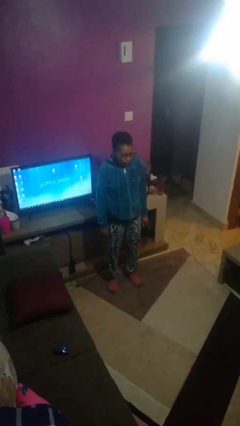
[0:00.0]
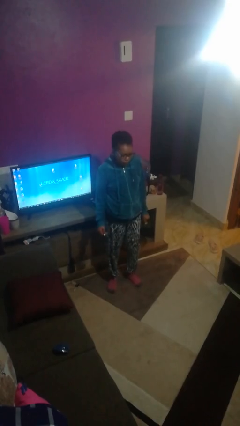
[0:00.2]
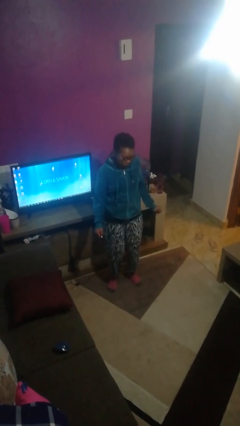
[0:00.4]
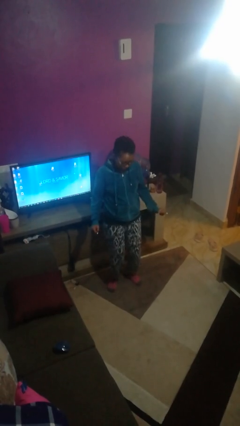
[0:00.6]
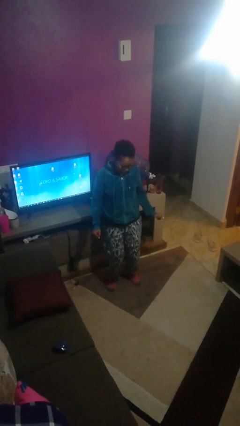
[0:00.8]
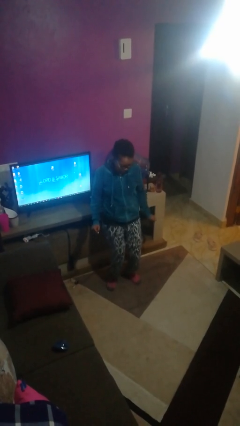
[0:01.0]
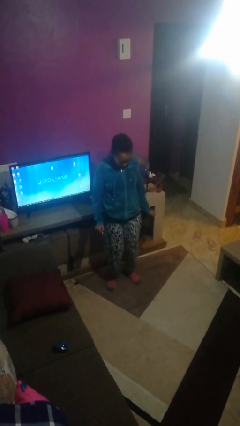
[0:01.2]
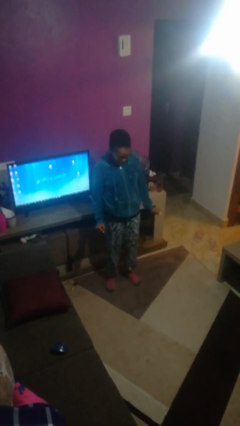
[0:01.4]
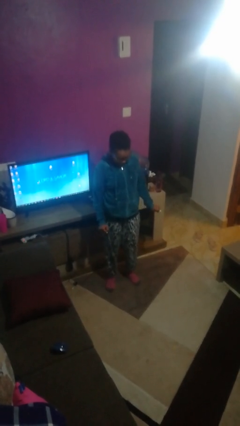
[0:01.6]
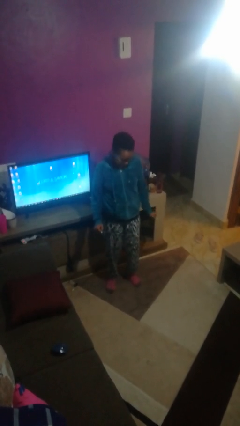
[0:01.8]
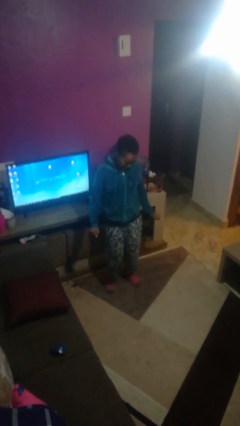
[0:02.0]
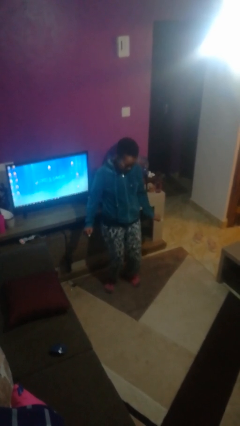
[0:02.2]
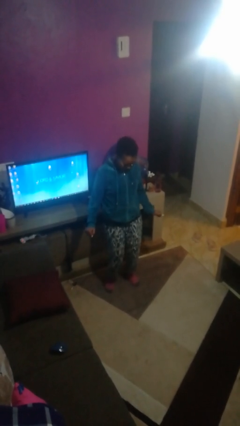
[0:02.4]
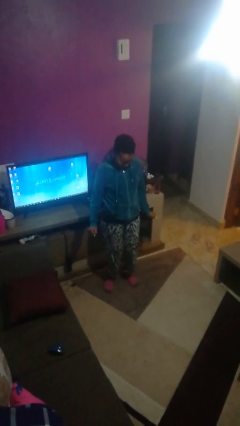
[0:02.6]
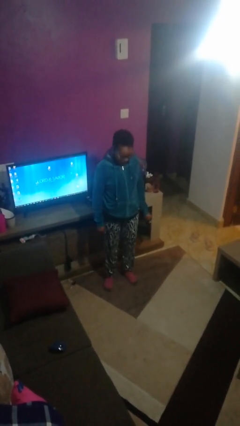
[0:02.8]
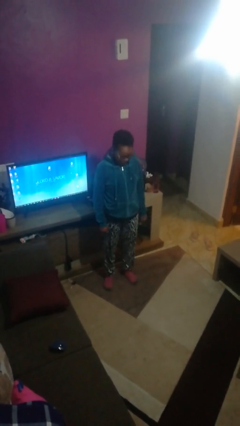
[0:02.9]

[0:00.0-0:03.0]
person dances in place

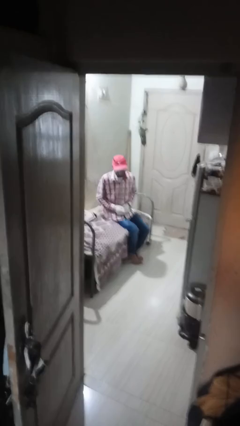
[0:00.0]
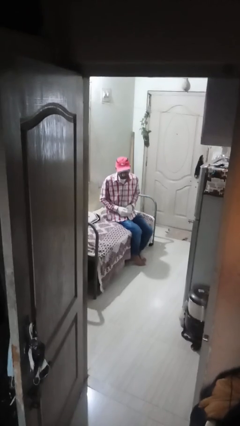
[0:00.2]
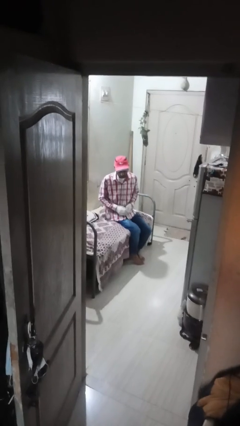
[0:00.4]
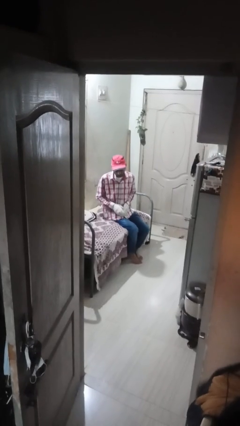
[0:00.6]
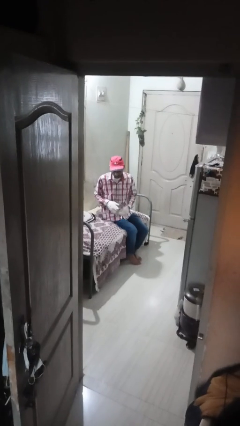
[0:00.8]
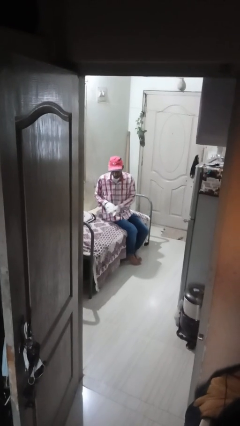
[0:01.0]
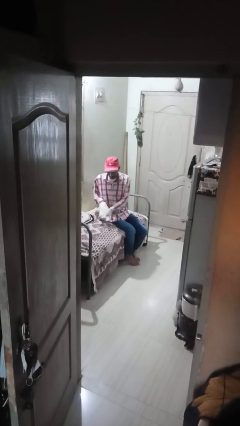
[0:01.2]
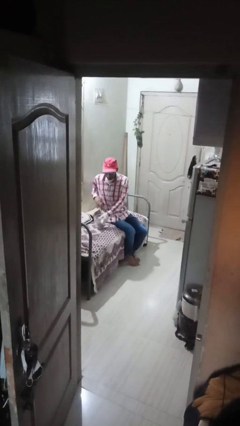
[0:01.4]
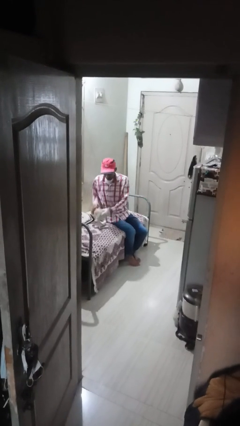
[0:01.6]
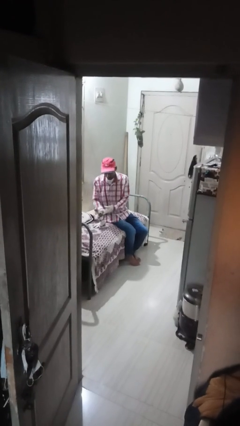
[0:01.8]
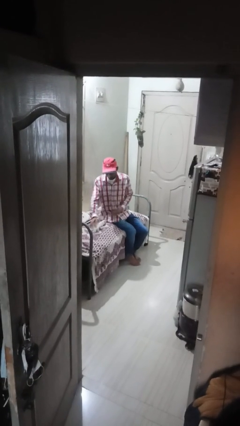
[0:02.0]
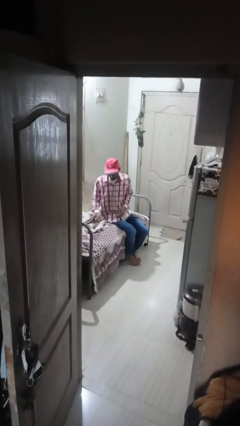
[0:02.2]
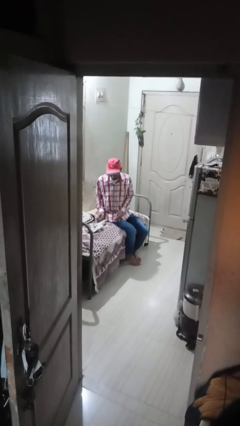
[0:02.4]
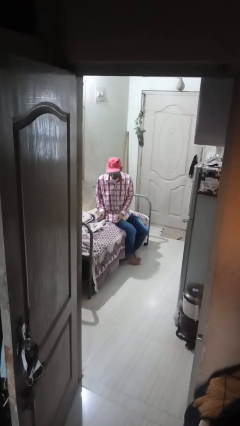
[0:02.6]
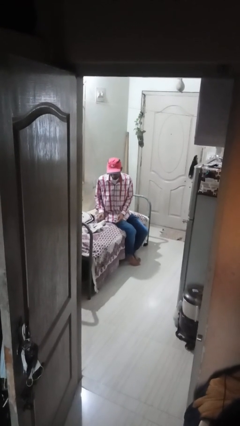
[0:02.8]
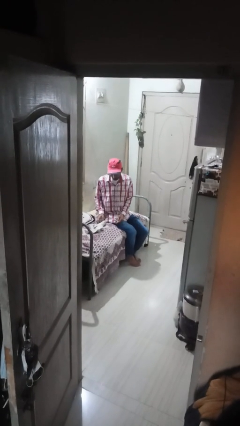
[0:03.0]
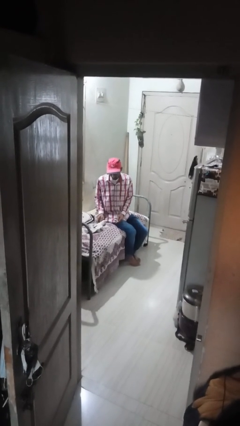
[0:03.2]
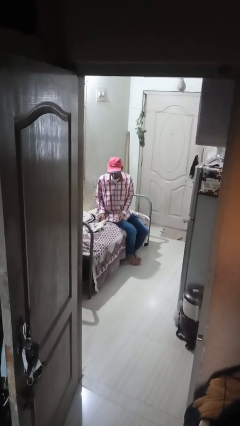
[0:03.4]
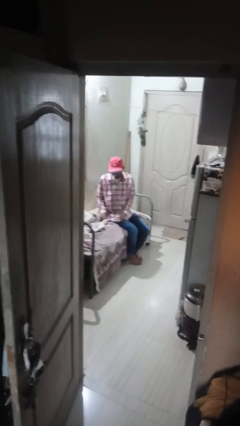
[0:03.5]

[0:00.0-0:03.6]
person takes off gloves

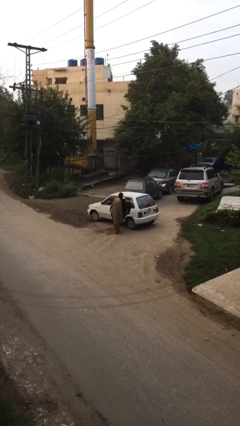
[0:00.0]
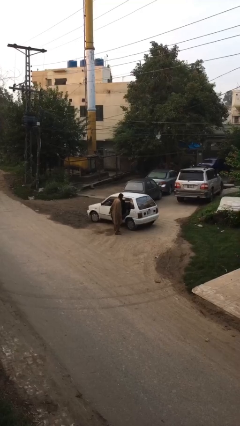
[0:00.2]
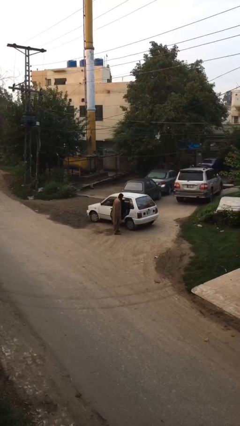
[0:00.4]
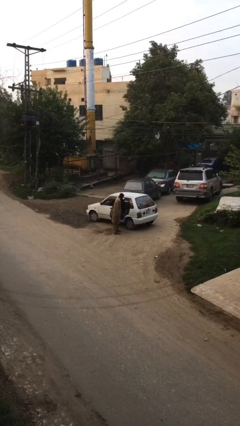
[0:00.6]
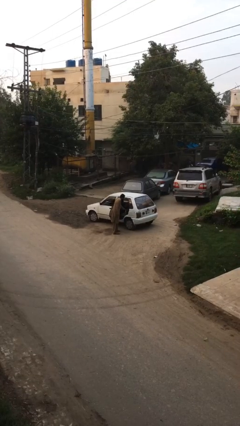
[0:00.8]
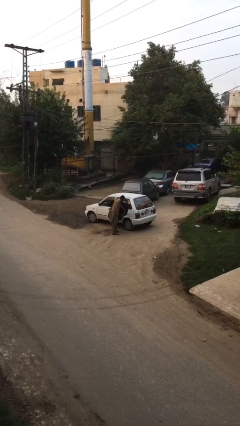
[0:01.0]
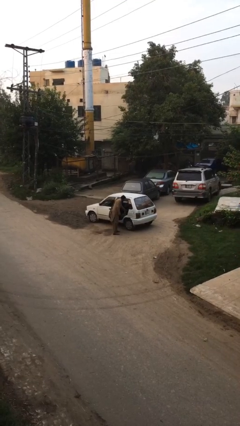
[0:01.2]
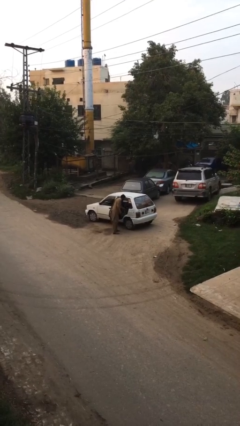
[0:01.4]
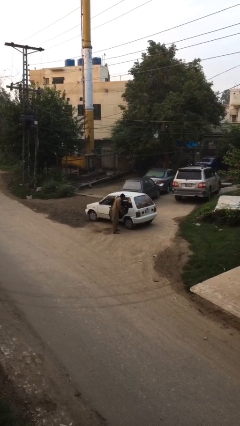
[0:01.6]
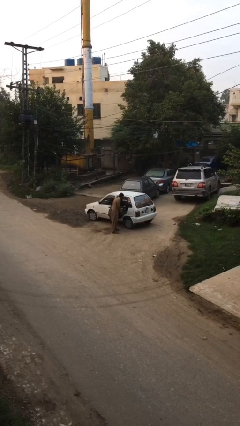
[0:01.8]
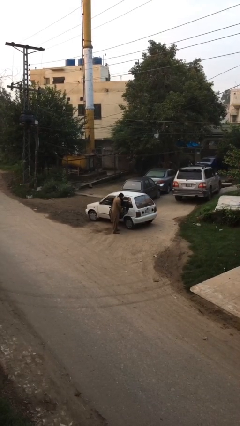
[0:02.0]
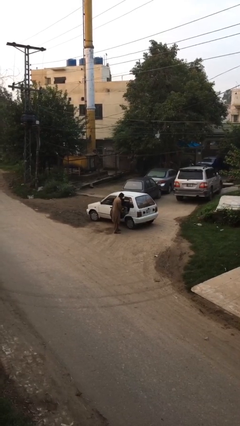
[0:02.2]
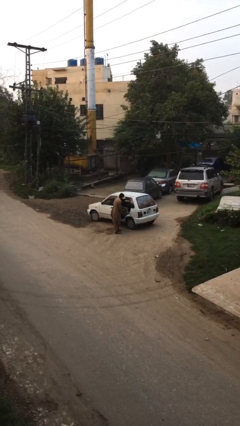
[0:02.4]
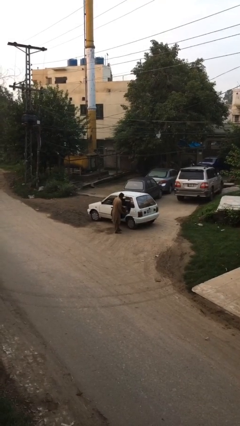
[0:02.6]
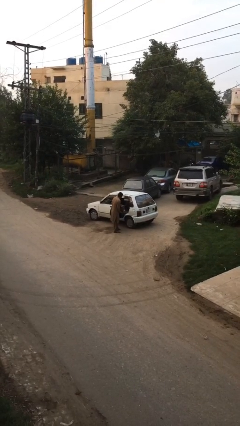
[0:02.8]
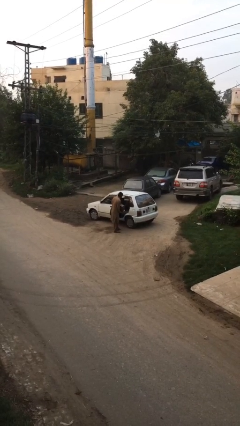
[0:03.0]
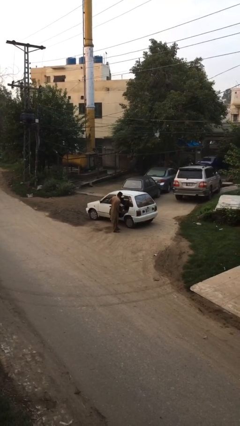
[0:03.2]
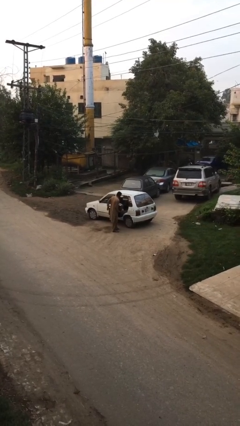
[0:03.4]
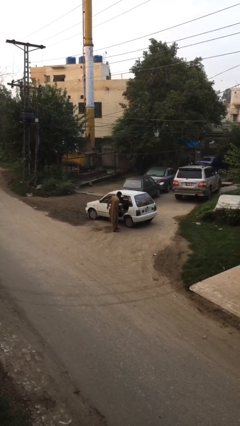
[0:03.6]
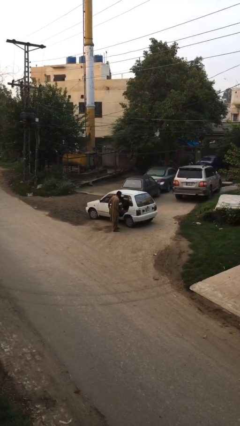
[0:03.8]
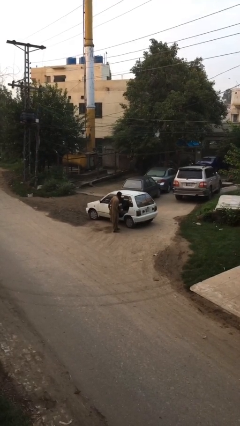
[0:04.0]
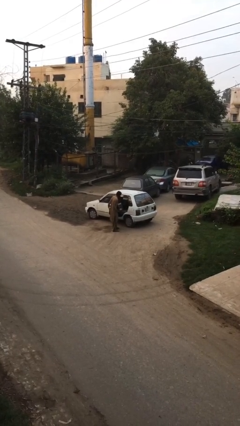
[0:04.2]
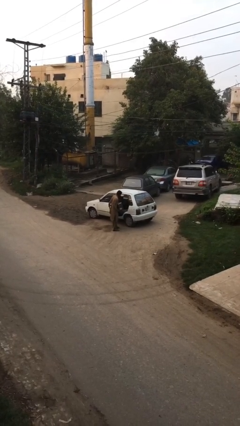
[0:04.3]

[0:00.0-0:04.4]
person unloads car

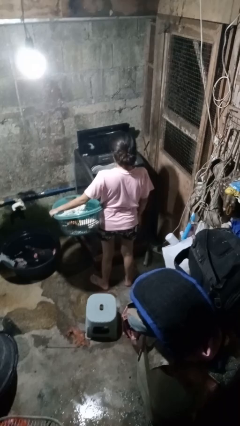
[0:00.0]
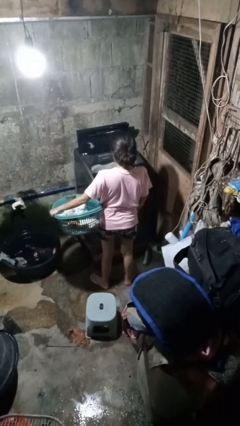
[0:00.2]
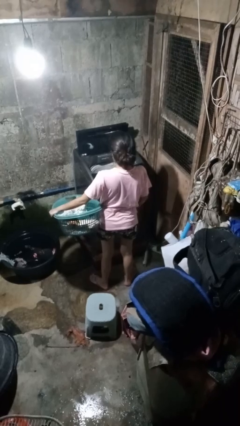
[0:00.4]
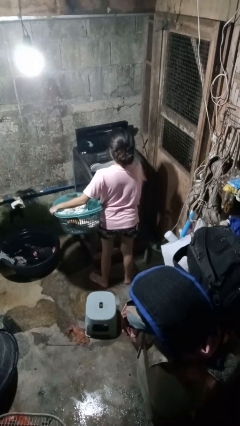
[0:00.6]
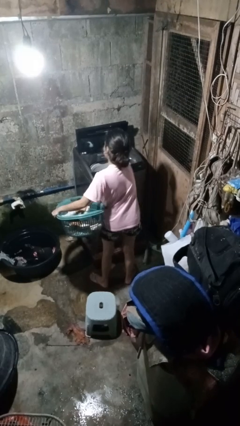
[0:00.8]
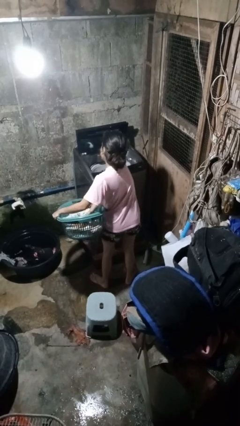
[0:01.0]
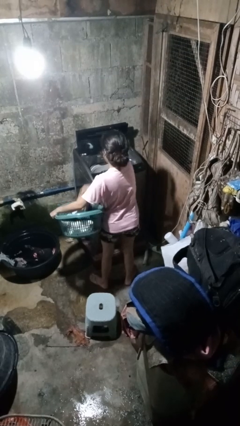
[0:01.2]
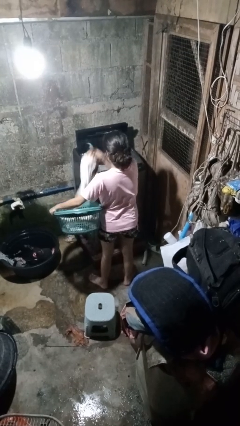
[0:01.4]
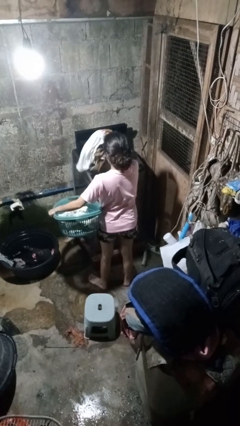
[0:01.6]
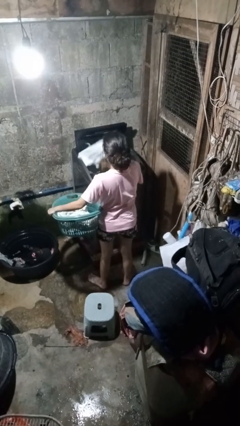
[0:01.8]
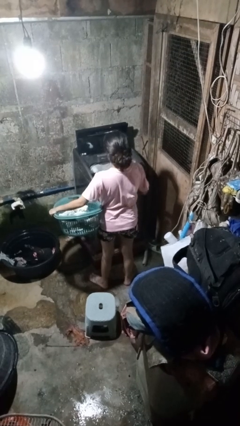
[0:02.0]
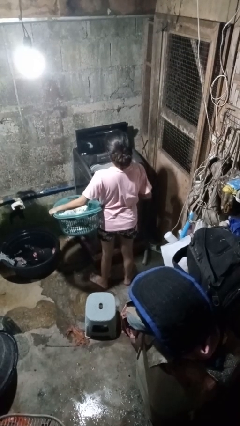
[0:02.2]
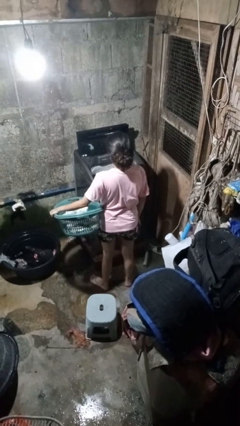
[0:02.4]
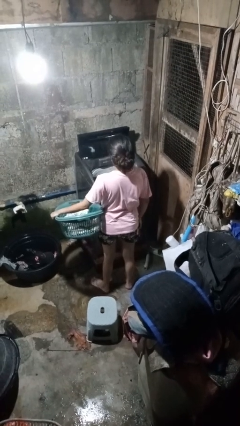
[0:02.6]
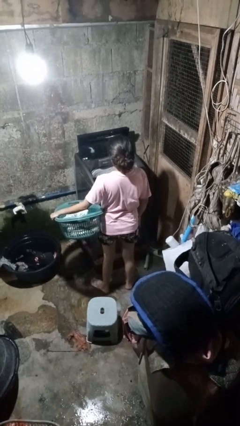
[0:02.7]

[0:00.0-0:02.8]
person loads dryer

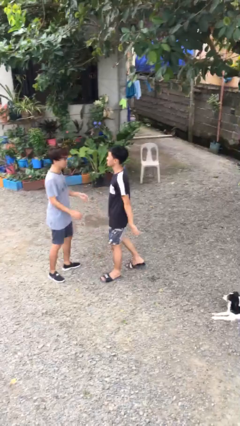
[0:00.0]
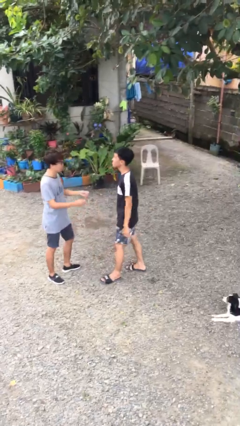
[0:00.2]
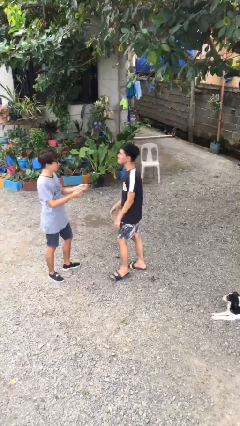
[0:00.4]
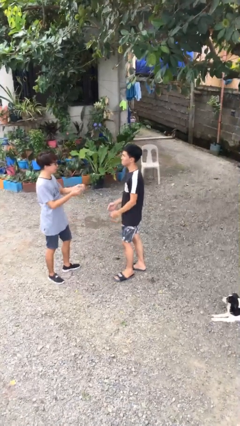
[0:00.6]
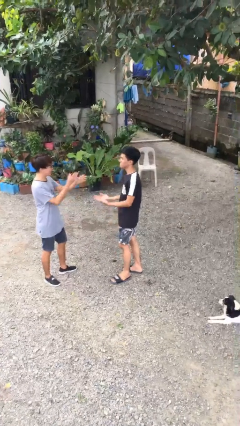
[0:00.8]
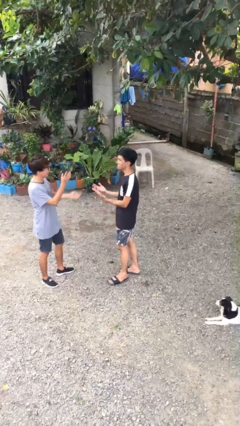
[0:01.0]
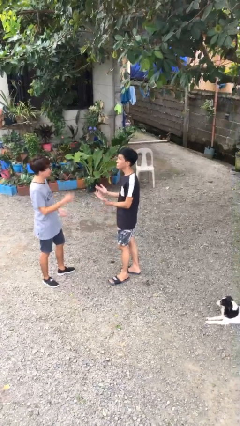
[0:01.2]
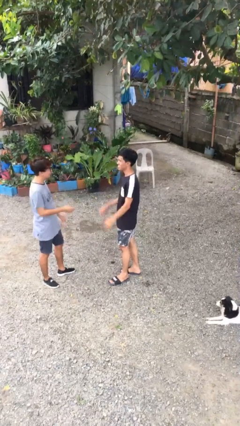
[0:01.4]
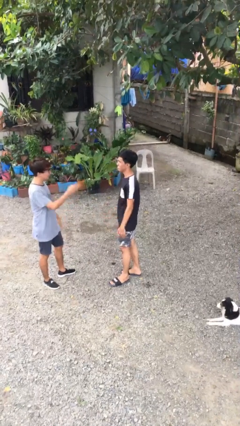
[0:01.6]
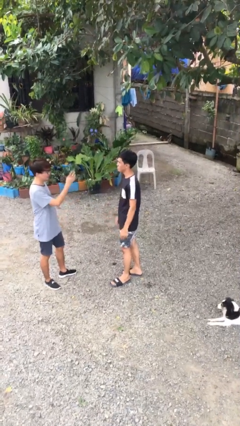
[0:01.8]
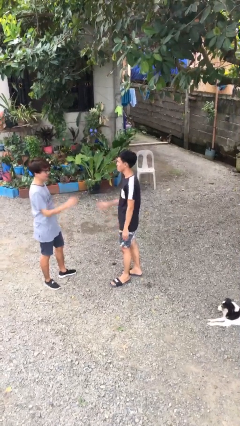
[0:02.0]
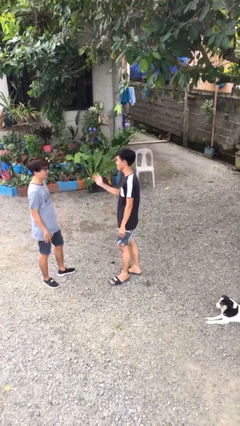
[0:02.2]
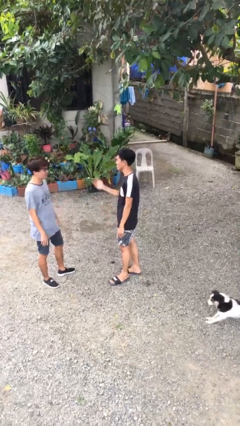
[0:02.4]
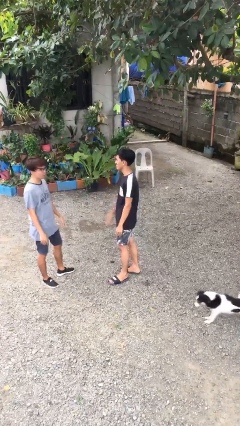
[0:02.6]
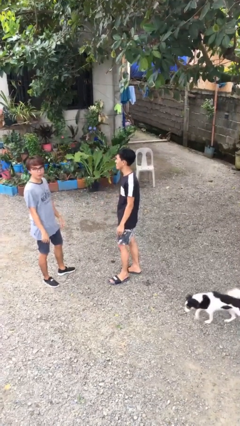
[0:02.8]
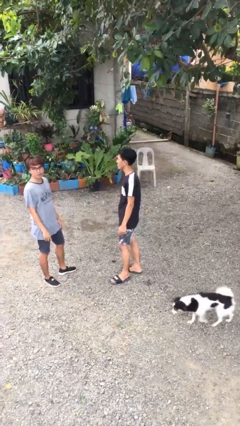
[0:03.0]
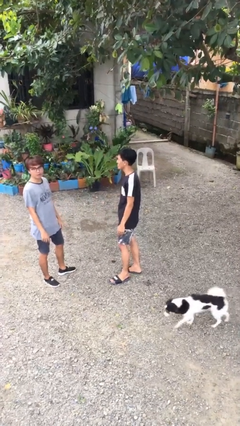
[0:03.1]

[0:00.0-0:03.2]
person talks to person

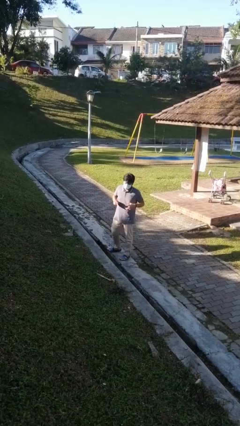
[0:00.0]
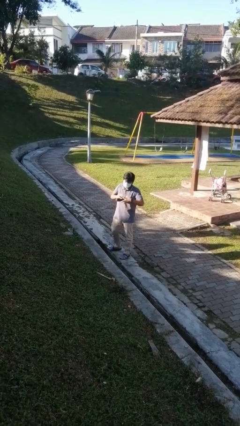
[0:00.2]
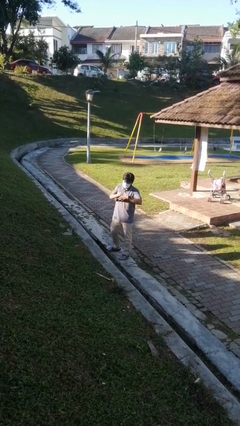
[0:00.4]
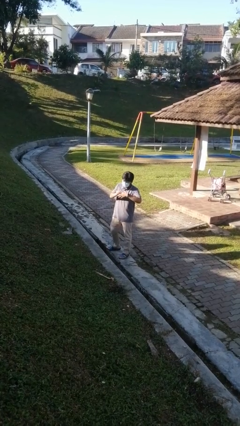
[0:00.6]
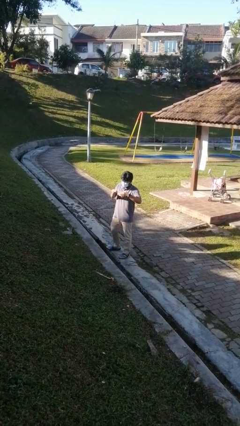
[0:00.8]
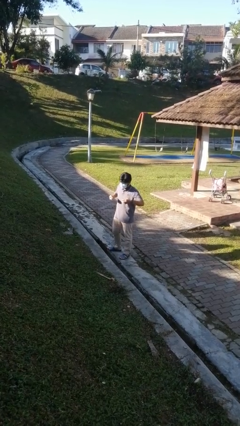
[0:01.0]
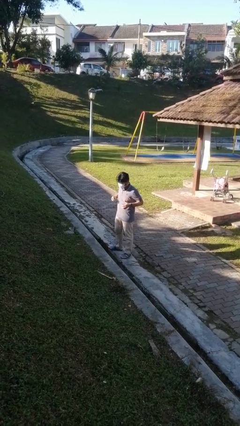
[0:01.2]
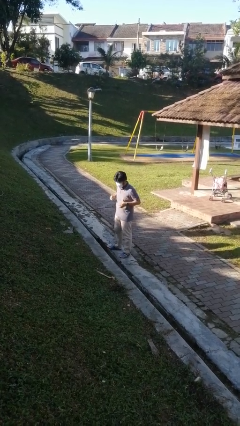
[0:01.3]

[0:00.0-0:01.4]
person takes off ring
